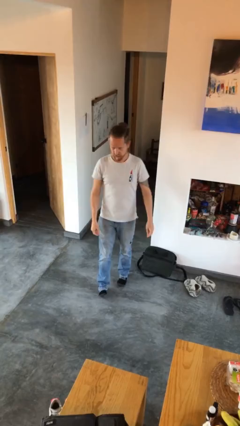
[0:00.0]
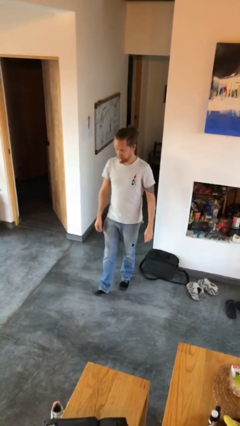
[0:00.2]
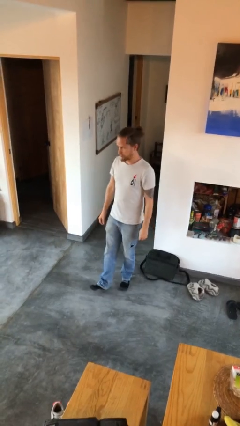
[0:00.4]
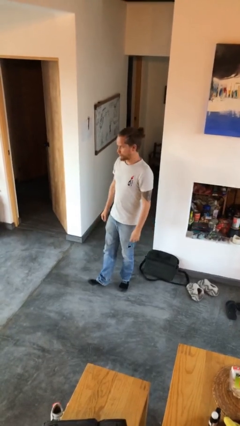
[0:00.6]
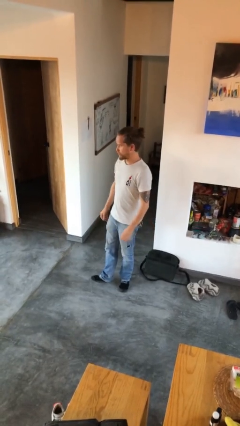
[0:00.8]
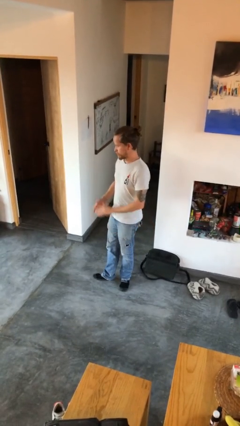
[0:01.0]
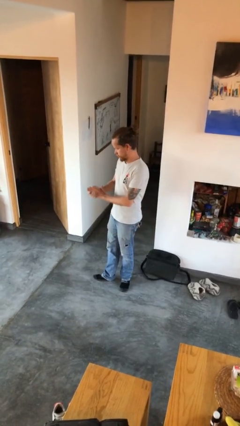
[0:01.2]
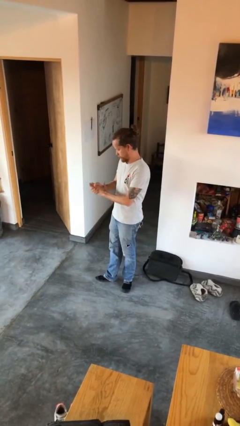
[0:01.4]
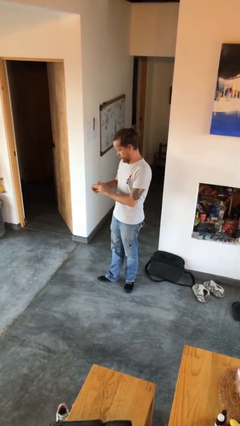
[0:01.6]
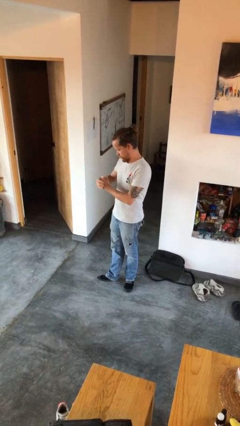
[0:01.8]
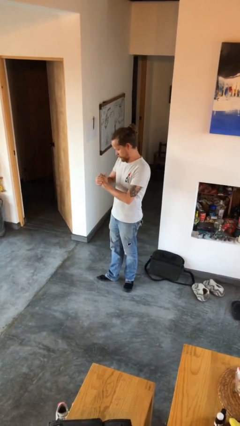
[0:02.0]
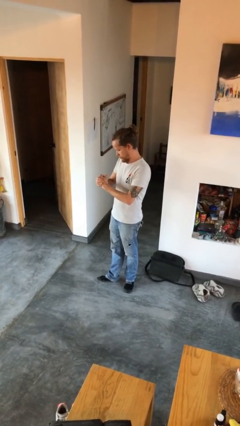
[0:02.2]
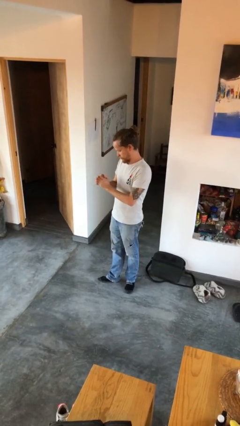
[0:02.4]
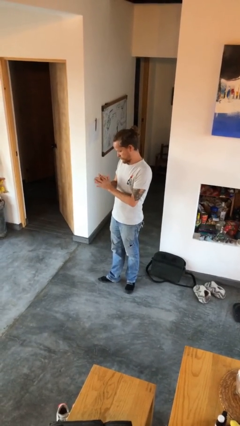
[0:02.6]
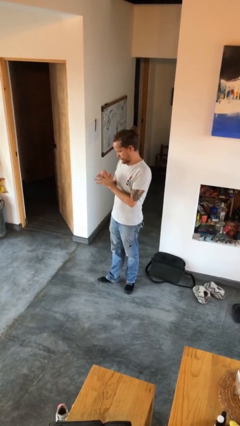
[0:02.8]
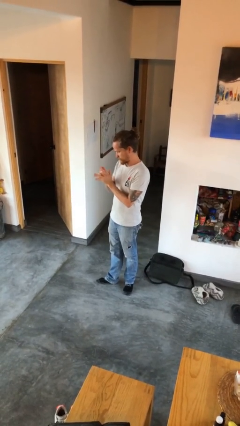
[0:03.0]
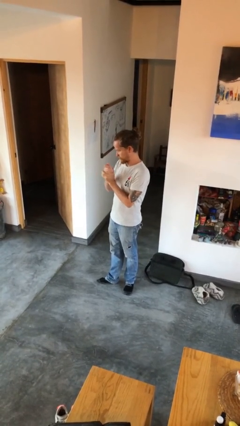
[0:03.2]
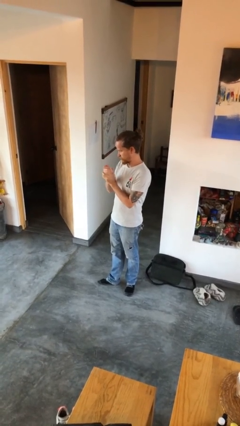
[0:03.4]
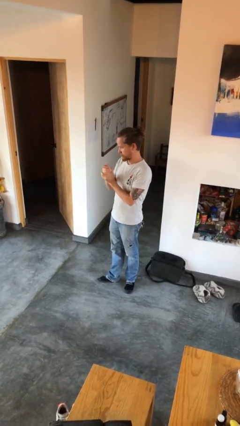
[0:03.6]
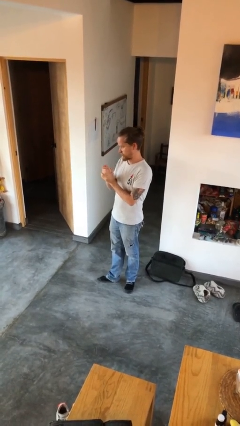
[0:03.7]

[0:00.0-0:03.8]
person cracks knuckles

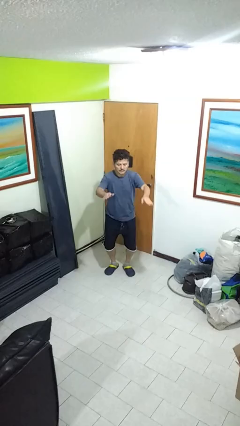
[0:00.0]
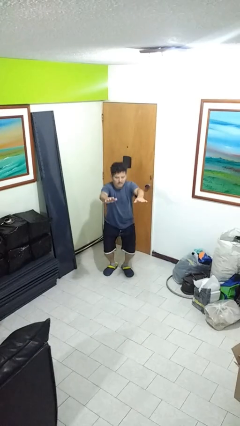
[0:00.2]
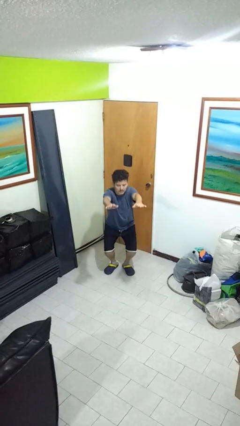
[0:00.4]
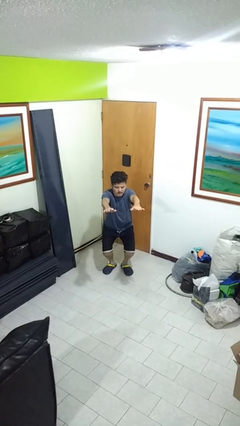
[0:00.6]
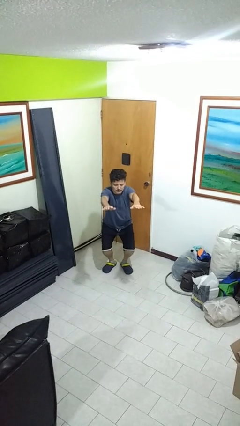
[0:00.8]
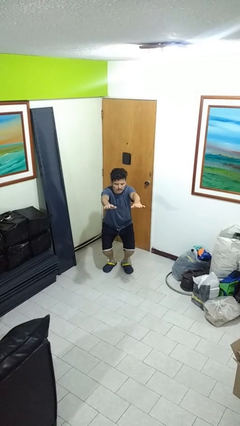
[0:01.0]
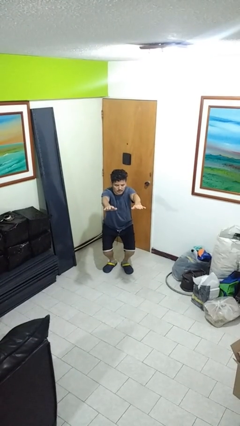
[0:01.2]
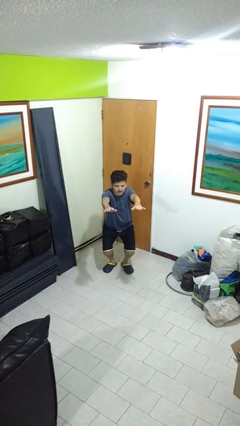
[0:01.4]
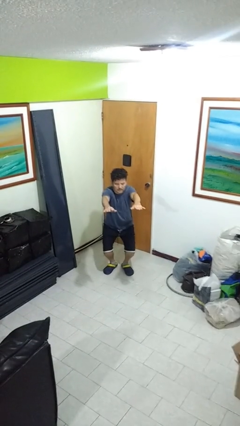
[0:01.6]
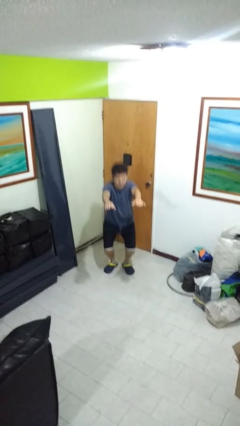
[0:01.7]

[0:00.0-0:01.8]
person squats

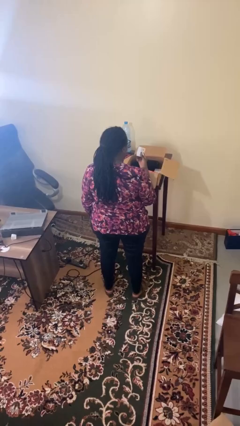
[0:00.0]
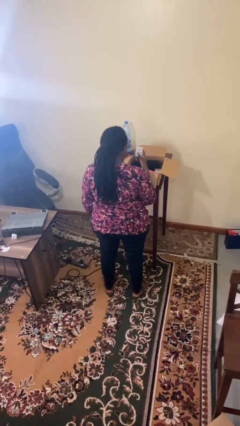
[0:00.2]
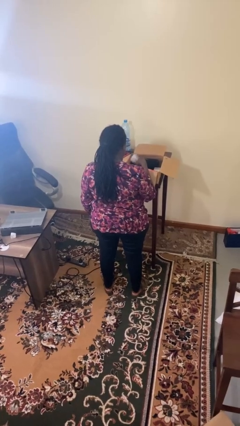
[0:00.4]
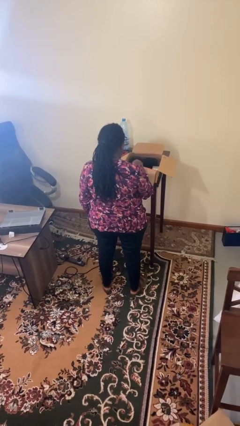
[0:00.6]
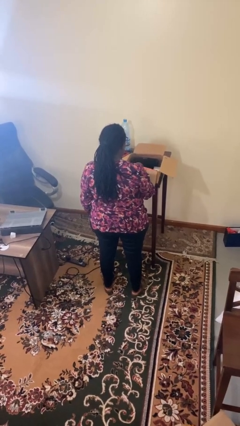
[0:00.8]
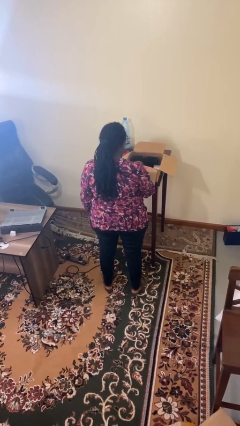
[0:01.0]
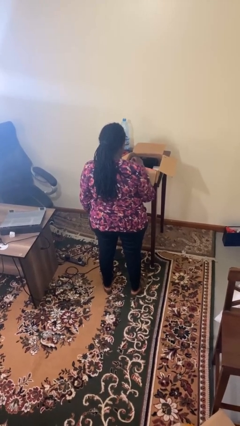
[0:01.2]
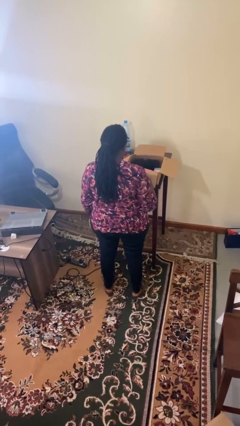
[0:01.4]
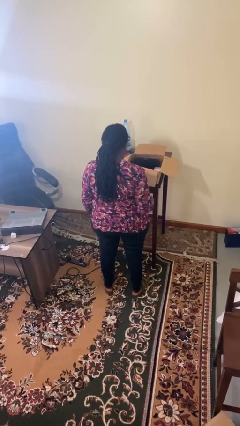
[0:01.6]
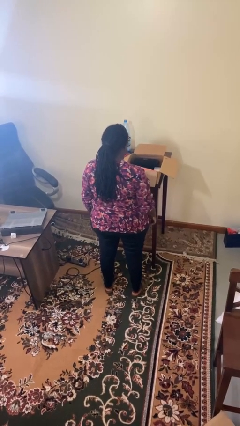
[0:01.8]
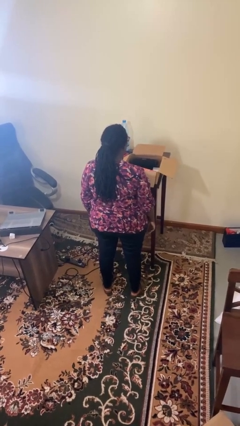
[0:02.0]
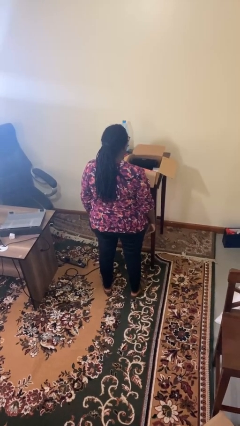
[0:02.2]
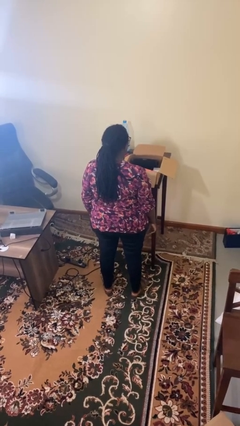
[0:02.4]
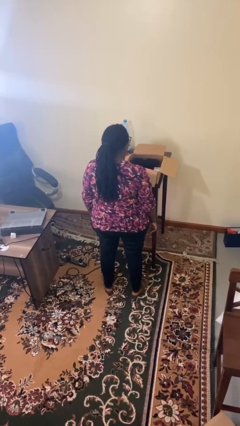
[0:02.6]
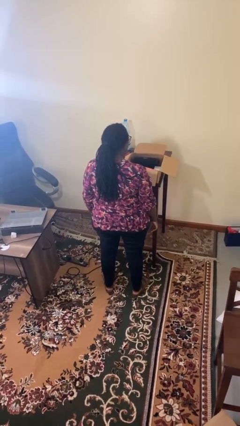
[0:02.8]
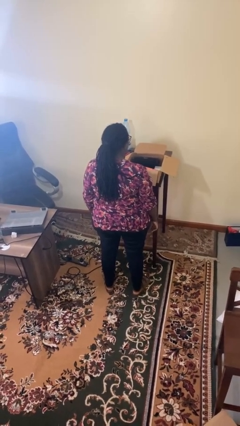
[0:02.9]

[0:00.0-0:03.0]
person puts object into box

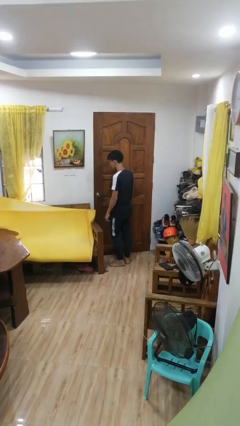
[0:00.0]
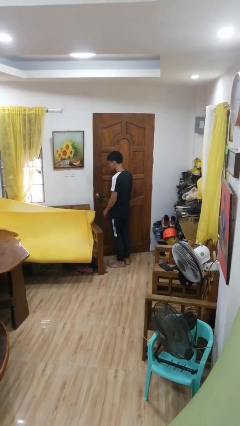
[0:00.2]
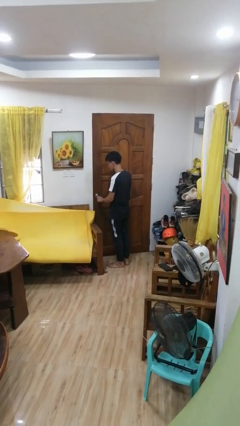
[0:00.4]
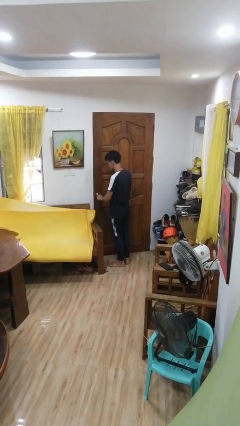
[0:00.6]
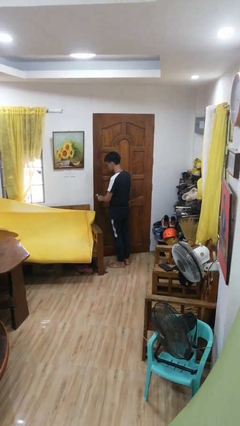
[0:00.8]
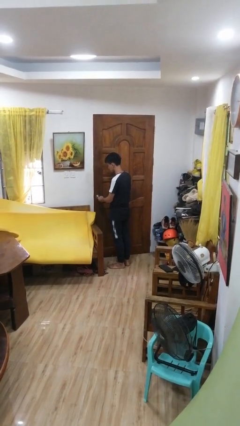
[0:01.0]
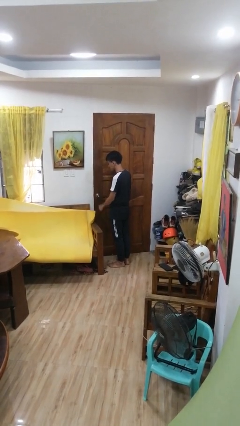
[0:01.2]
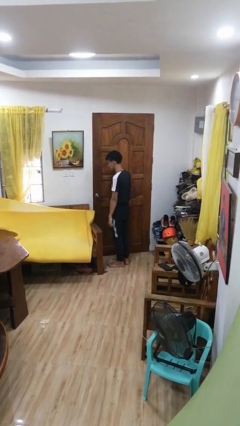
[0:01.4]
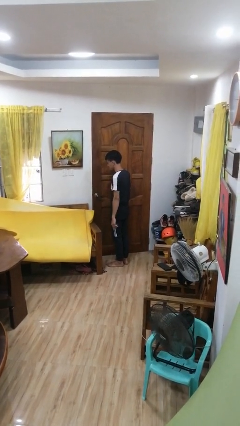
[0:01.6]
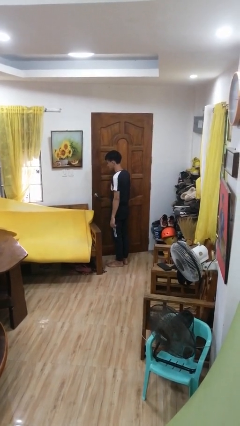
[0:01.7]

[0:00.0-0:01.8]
person locks door with keys

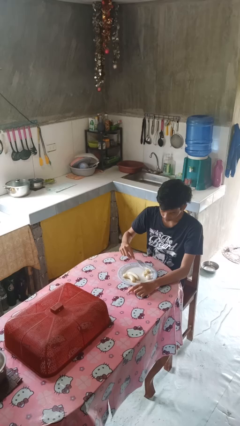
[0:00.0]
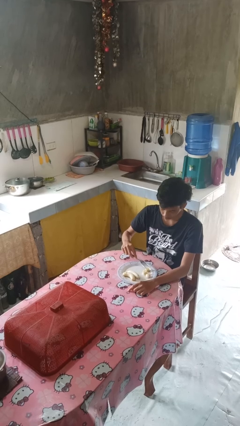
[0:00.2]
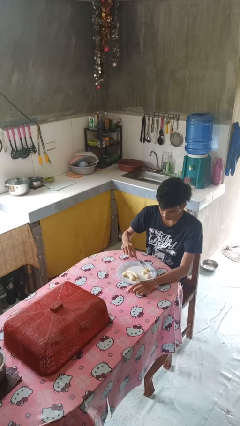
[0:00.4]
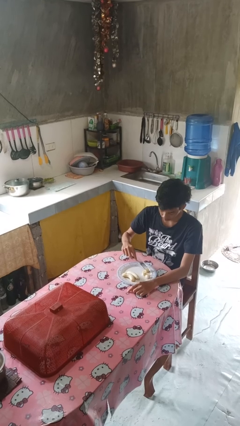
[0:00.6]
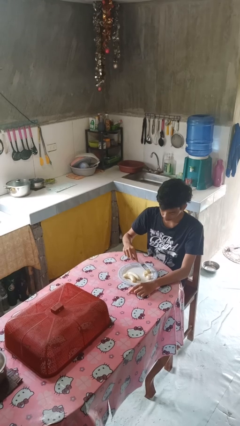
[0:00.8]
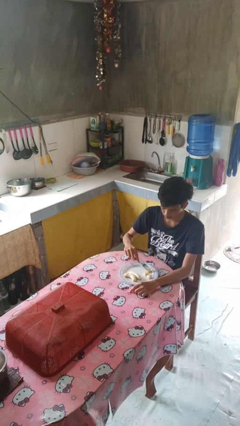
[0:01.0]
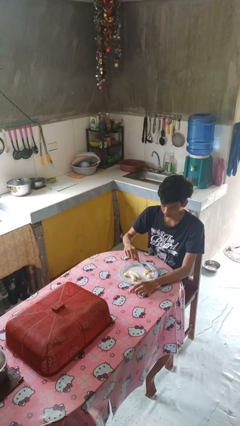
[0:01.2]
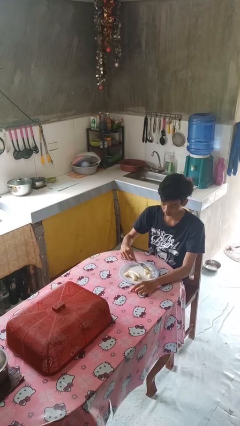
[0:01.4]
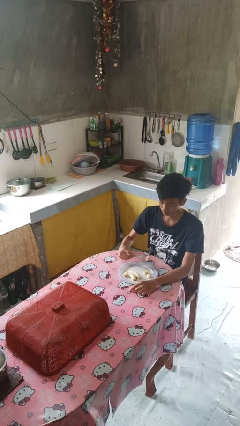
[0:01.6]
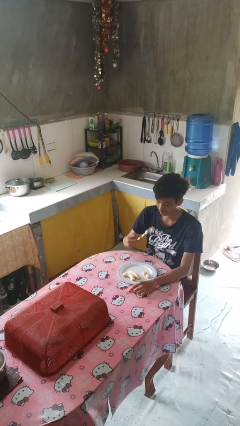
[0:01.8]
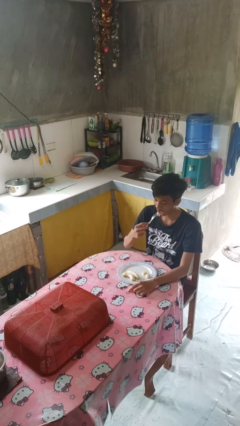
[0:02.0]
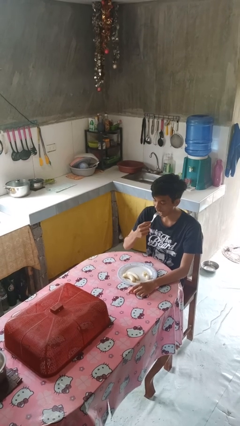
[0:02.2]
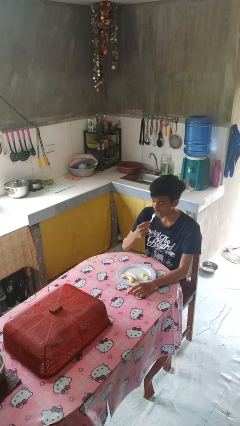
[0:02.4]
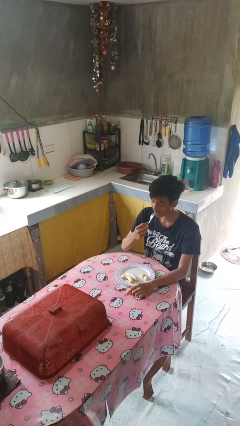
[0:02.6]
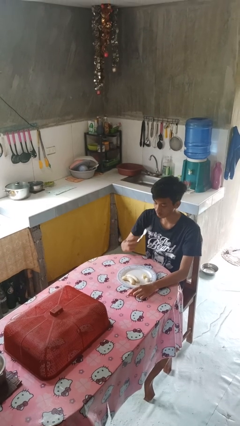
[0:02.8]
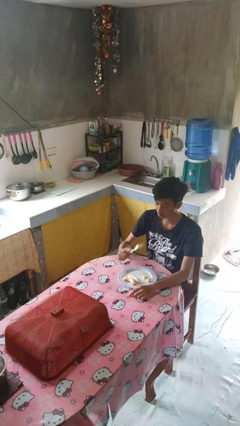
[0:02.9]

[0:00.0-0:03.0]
person eats with utensil

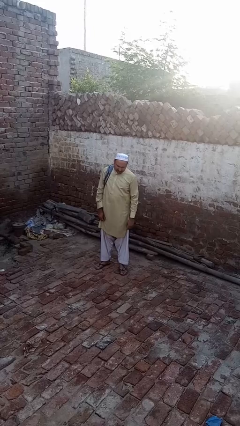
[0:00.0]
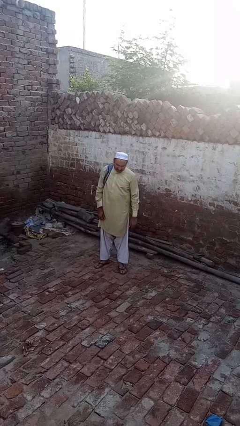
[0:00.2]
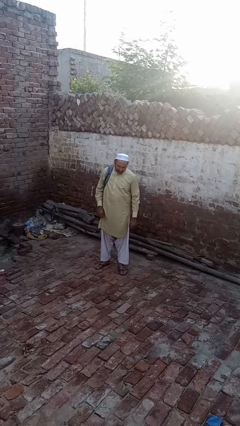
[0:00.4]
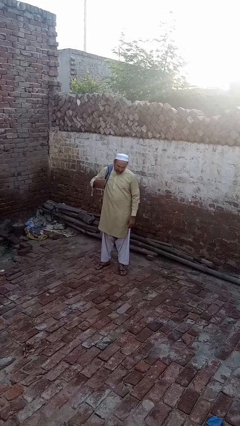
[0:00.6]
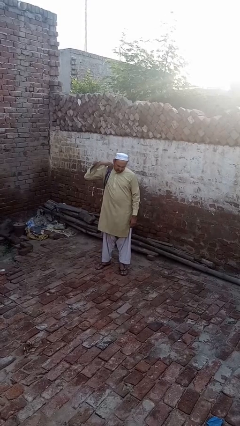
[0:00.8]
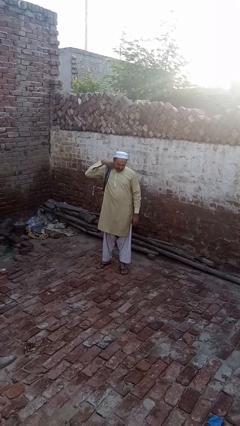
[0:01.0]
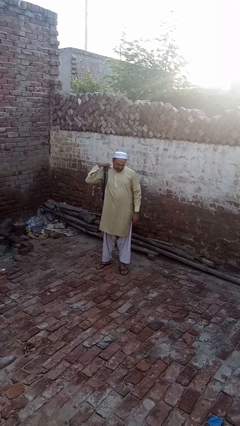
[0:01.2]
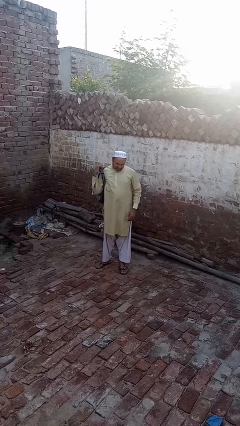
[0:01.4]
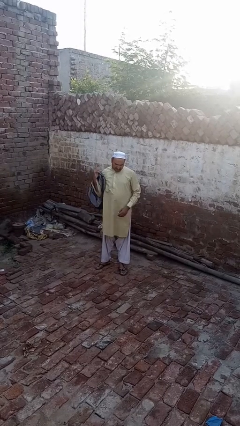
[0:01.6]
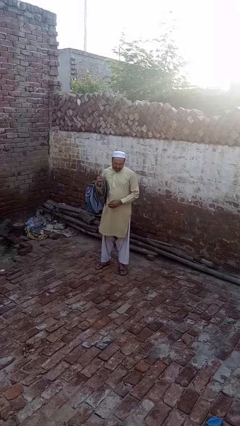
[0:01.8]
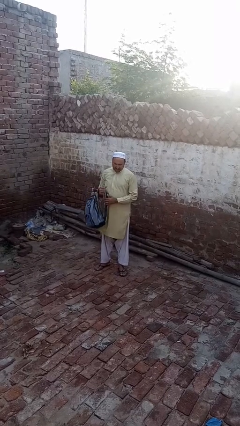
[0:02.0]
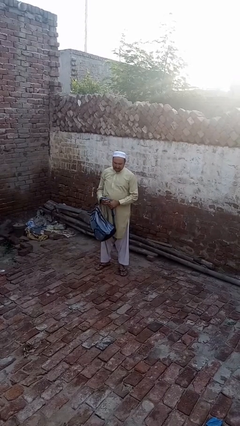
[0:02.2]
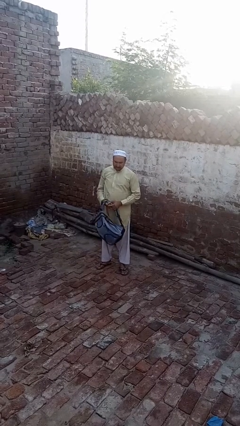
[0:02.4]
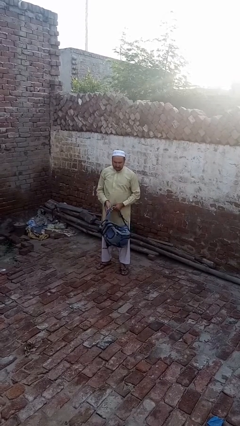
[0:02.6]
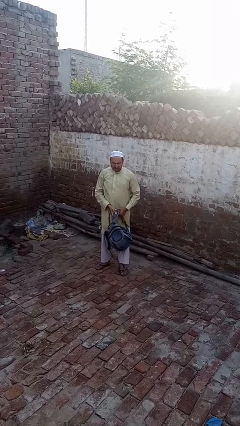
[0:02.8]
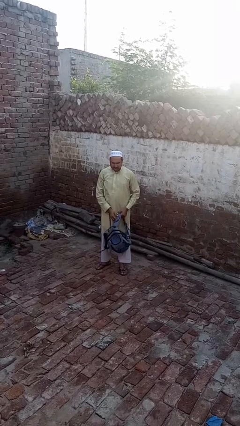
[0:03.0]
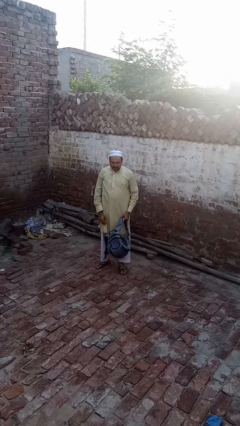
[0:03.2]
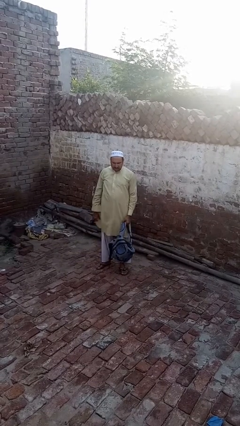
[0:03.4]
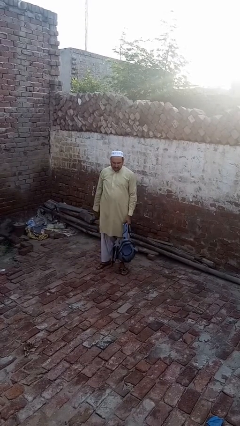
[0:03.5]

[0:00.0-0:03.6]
person takes off backpack

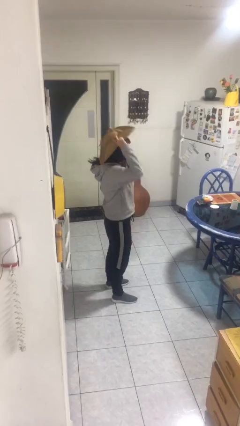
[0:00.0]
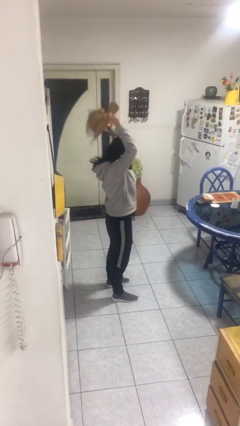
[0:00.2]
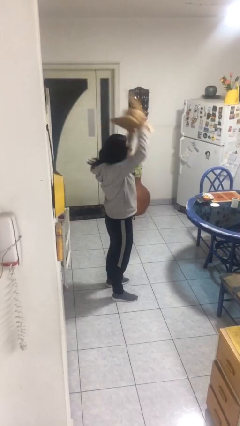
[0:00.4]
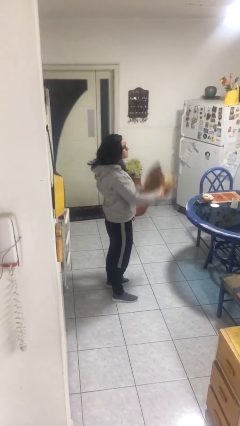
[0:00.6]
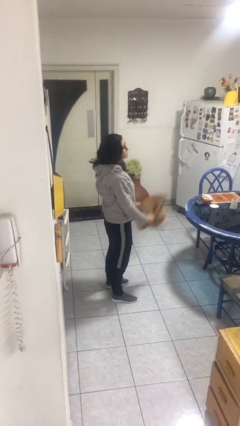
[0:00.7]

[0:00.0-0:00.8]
person takes off hat
